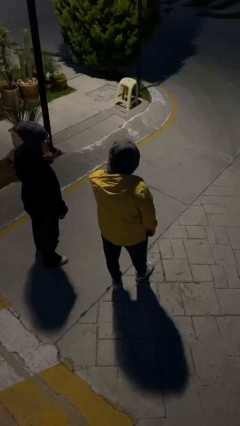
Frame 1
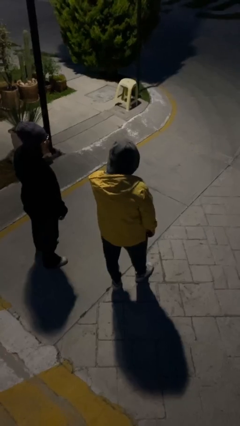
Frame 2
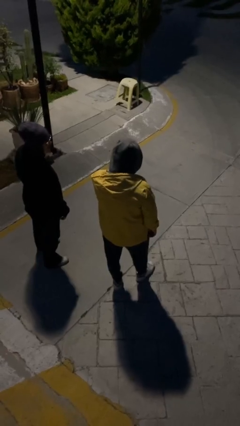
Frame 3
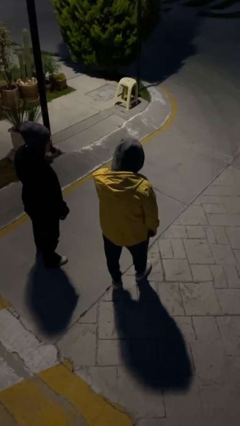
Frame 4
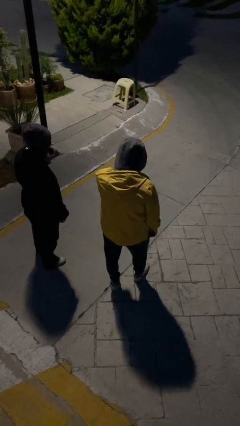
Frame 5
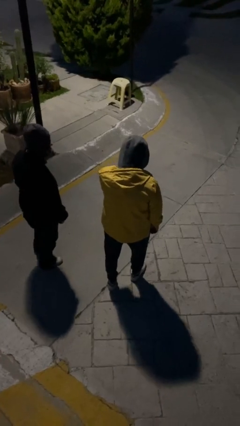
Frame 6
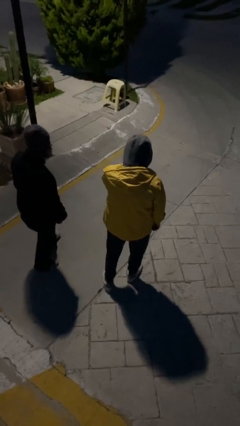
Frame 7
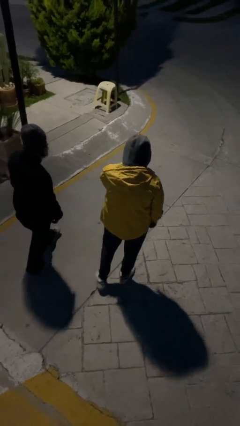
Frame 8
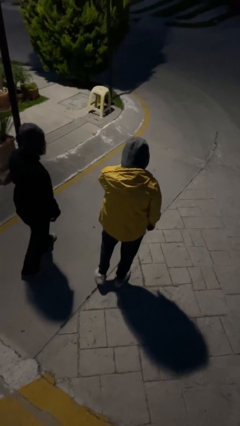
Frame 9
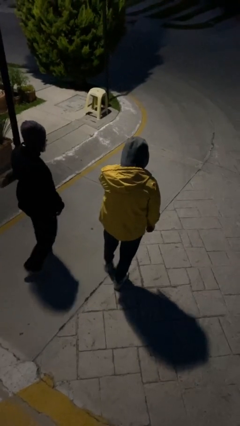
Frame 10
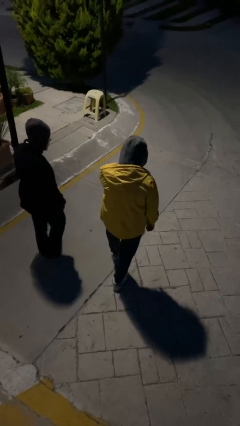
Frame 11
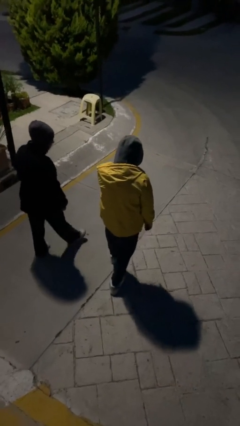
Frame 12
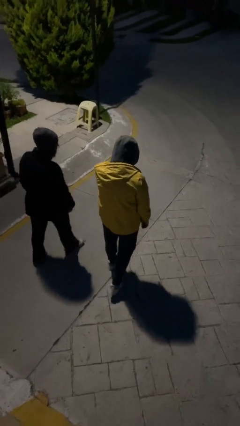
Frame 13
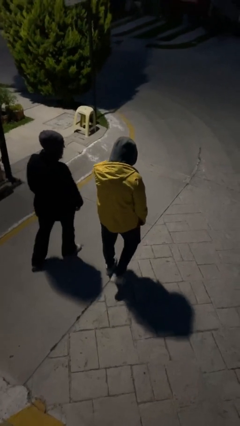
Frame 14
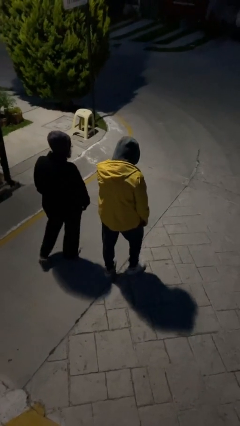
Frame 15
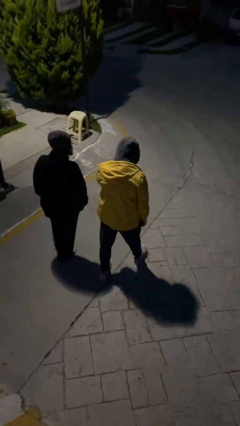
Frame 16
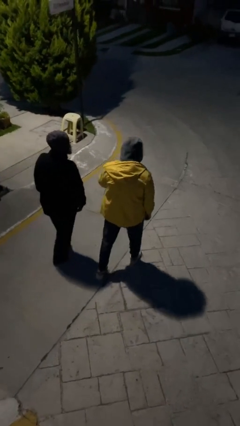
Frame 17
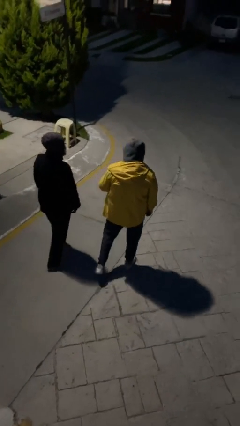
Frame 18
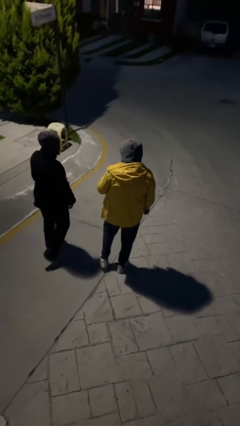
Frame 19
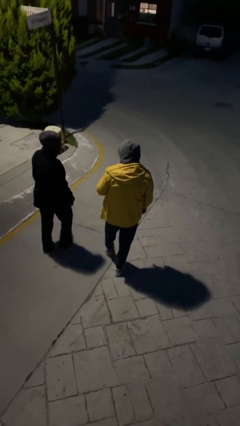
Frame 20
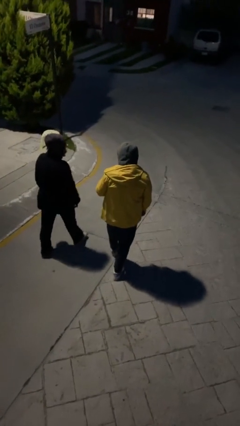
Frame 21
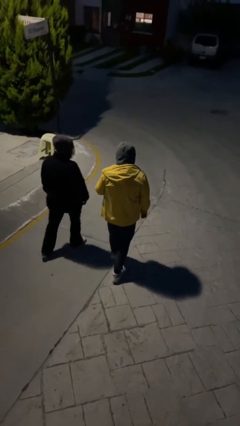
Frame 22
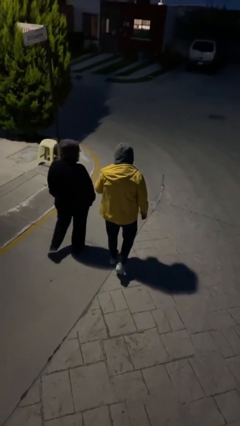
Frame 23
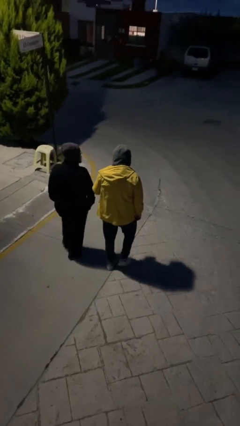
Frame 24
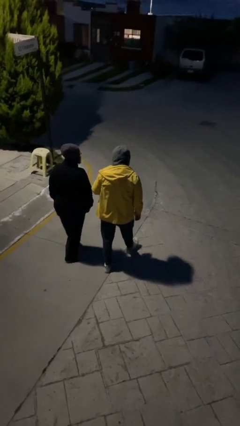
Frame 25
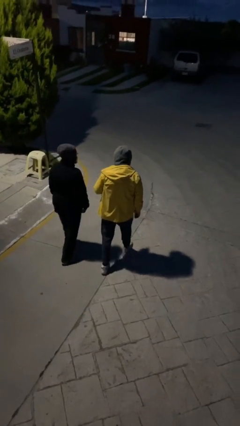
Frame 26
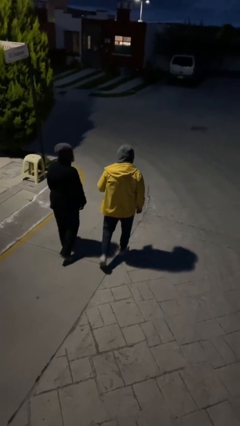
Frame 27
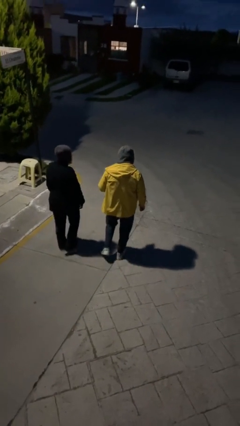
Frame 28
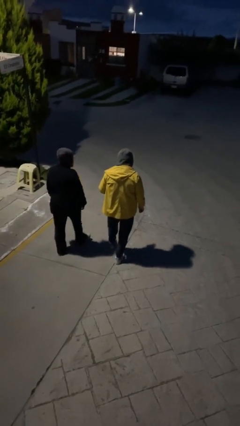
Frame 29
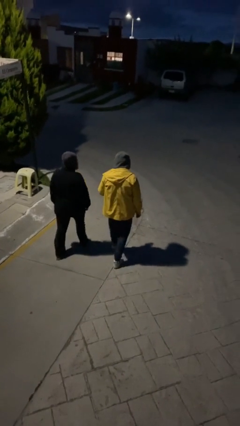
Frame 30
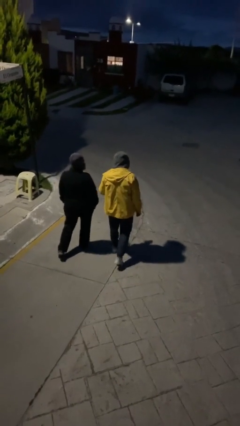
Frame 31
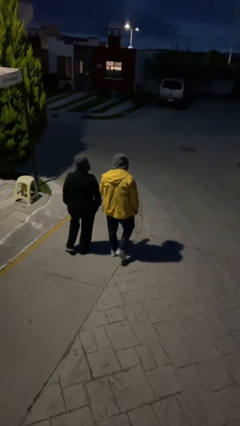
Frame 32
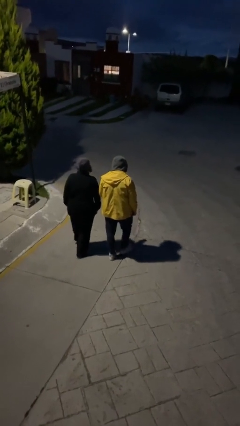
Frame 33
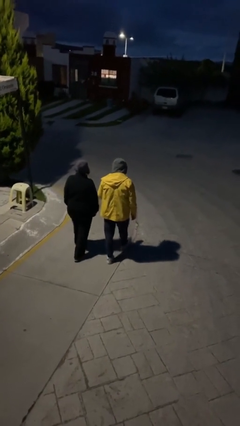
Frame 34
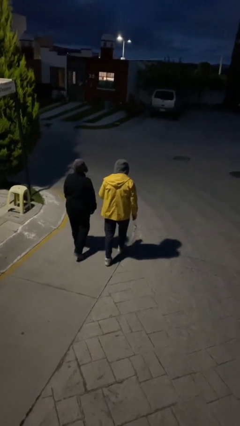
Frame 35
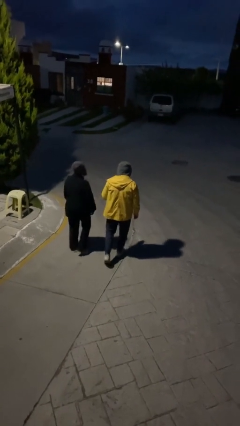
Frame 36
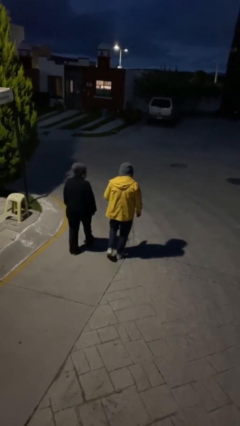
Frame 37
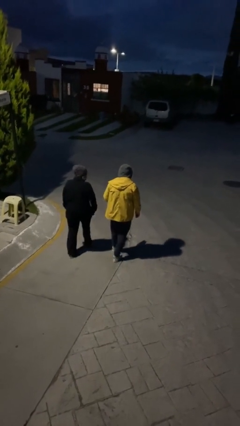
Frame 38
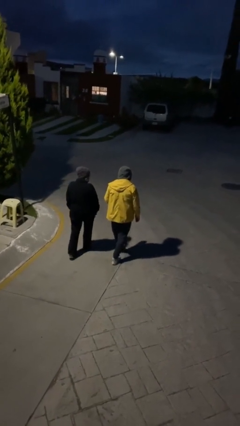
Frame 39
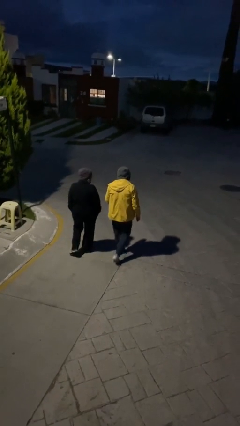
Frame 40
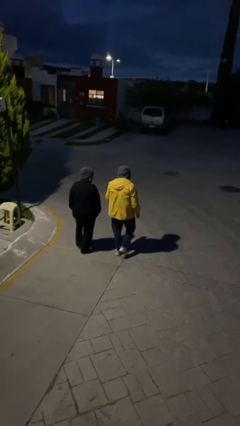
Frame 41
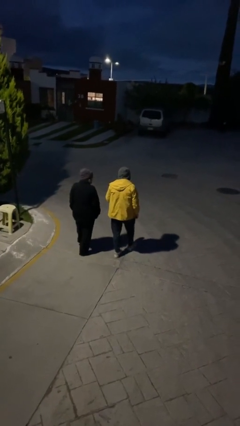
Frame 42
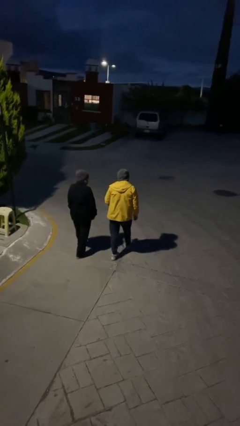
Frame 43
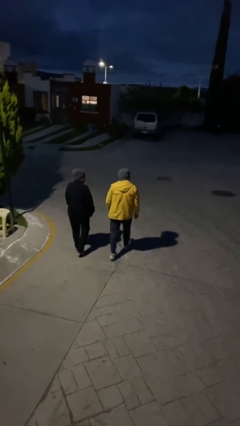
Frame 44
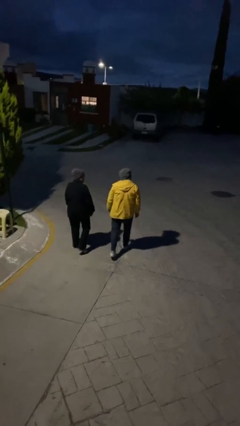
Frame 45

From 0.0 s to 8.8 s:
person talks to person

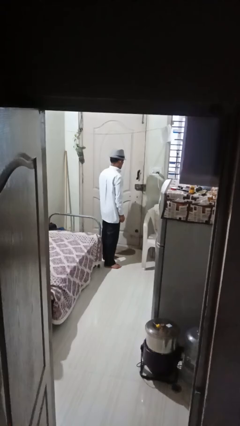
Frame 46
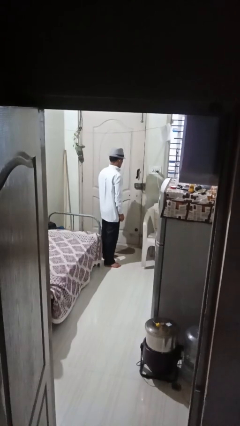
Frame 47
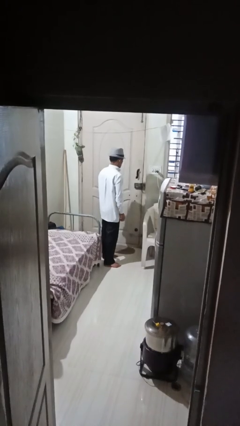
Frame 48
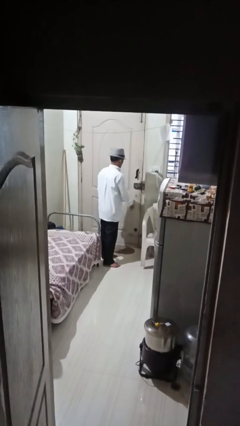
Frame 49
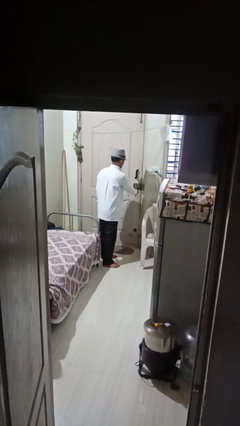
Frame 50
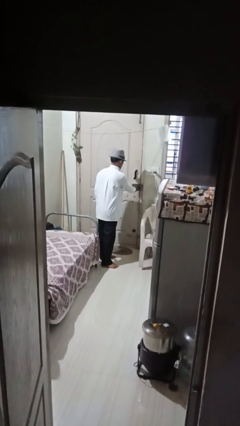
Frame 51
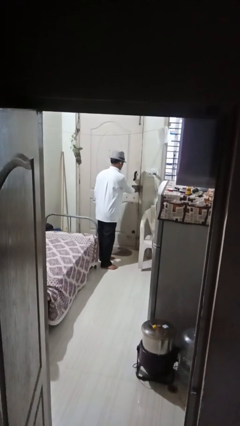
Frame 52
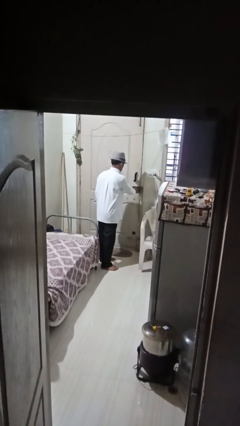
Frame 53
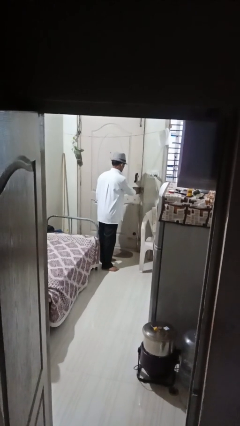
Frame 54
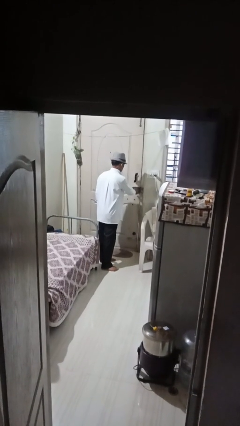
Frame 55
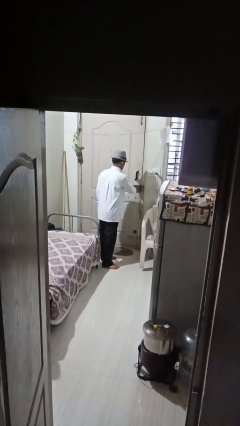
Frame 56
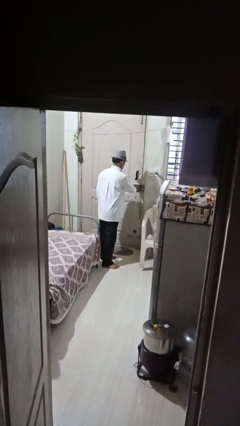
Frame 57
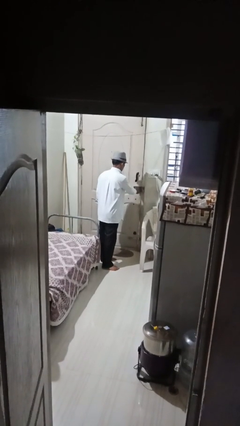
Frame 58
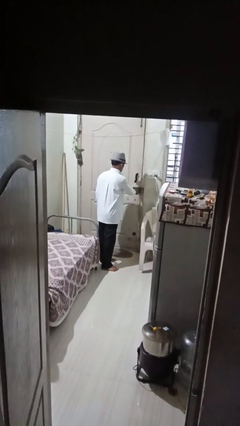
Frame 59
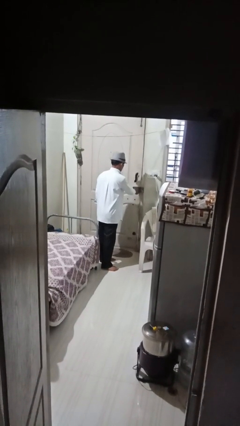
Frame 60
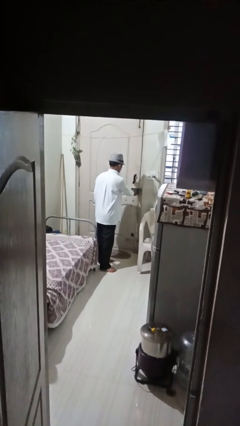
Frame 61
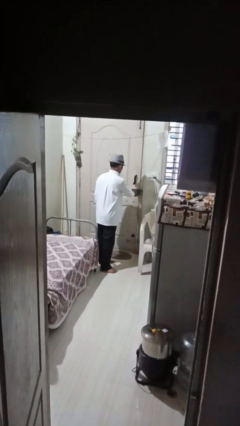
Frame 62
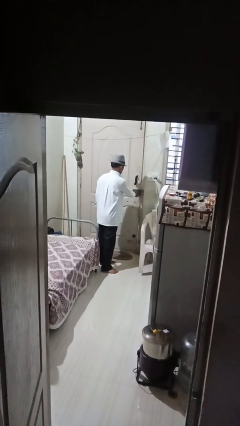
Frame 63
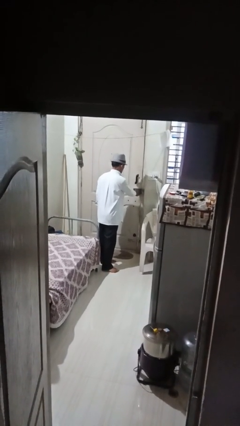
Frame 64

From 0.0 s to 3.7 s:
person unlocks door with keys

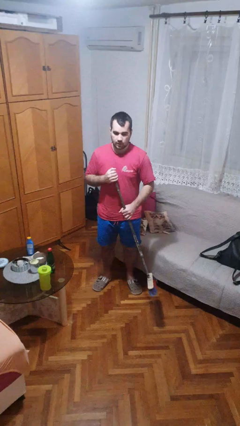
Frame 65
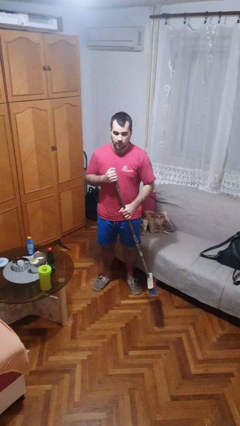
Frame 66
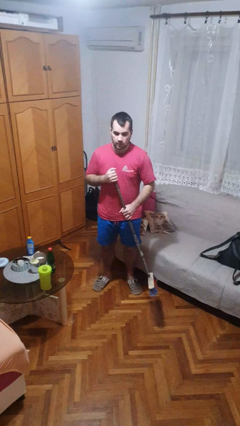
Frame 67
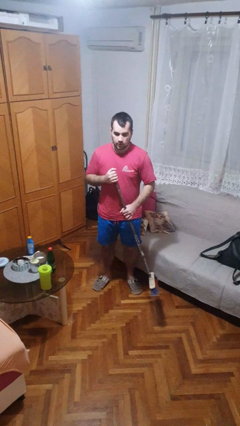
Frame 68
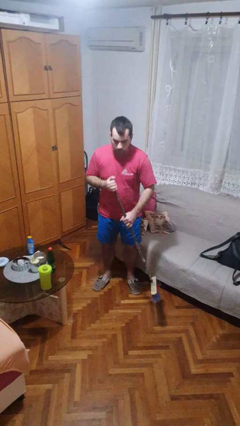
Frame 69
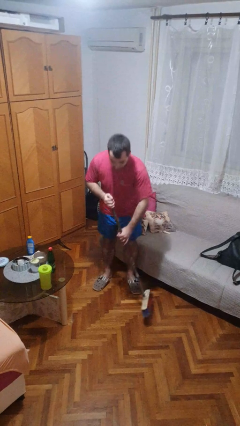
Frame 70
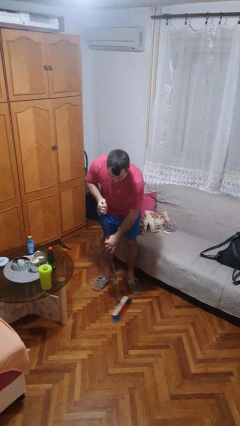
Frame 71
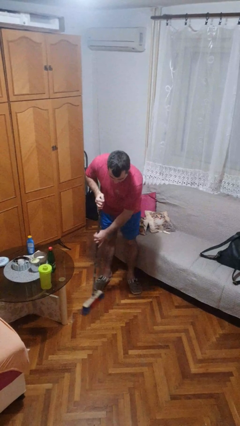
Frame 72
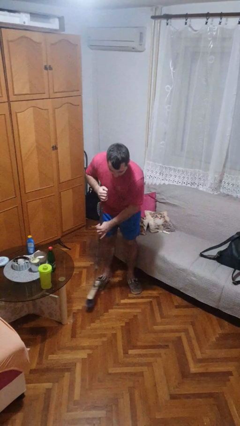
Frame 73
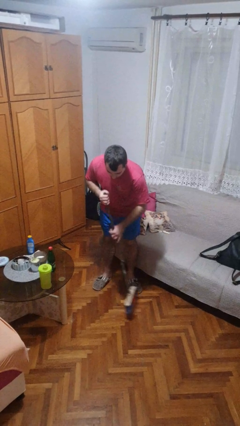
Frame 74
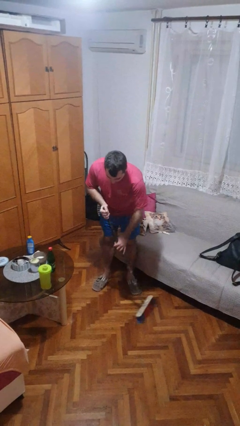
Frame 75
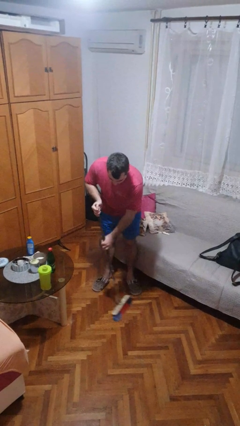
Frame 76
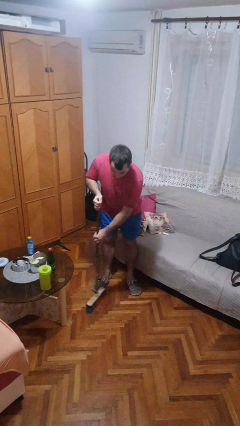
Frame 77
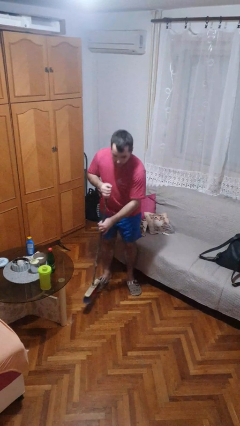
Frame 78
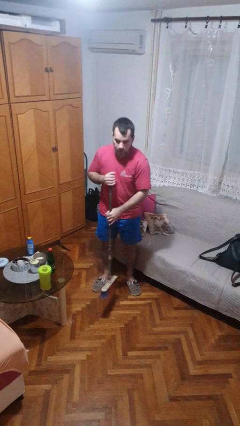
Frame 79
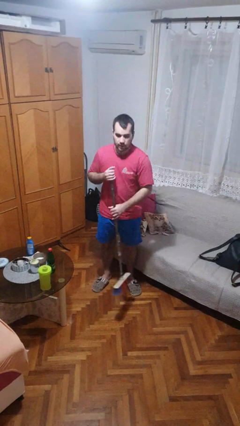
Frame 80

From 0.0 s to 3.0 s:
person sweeps floor

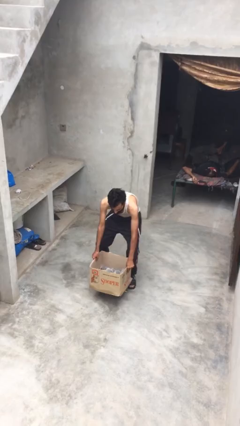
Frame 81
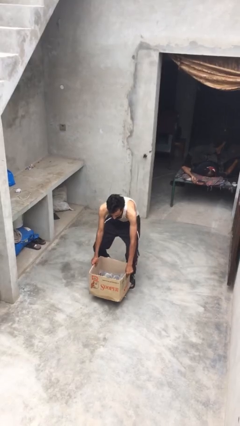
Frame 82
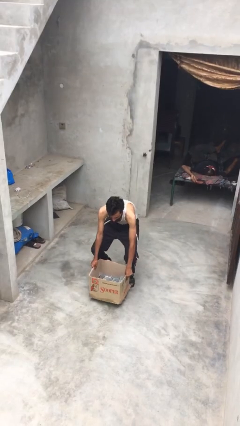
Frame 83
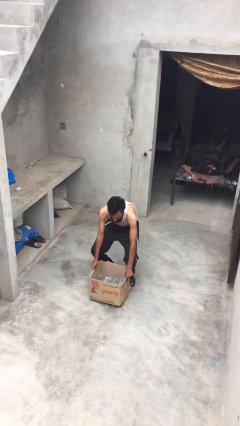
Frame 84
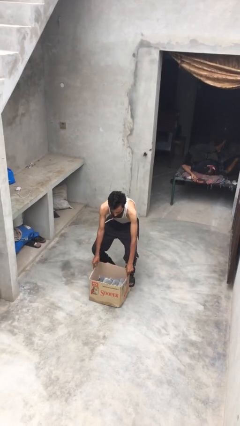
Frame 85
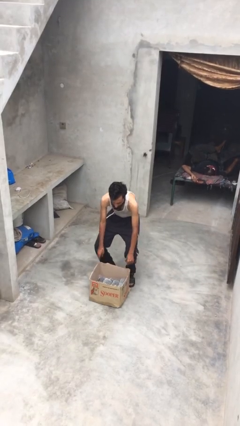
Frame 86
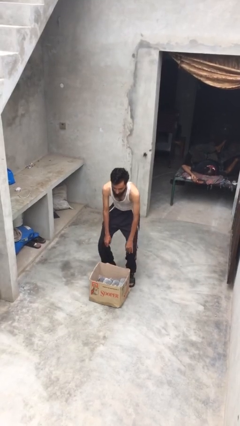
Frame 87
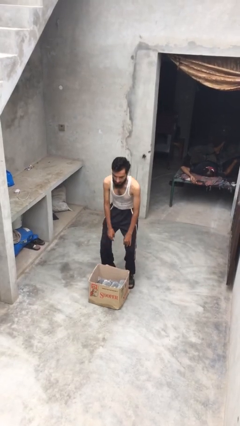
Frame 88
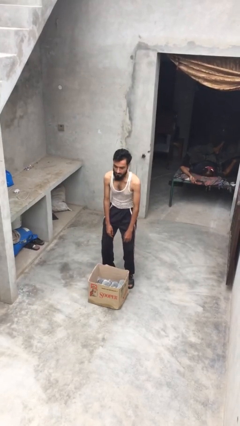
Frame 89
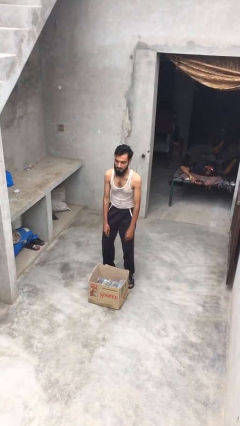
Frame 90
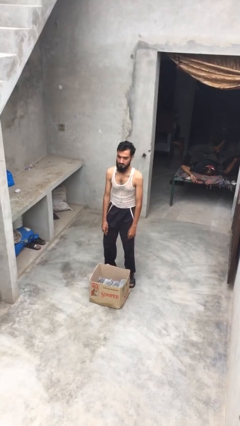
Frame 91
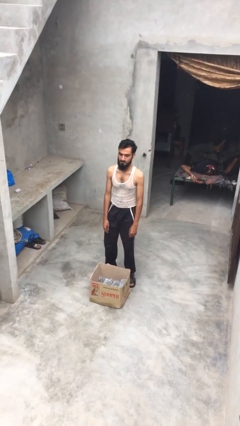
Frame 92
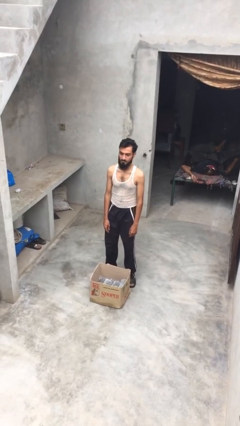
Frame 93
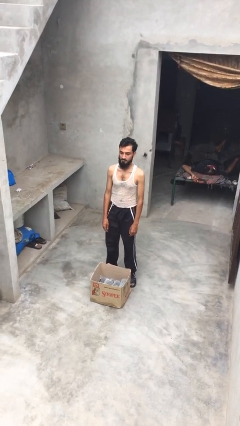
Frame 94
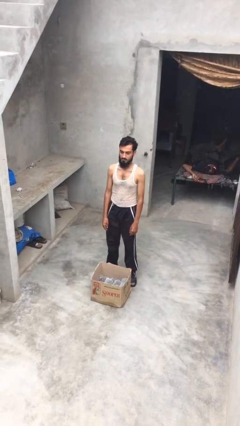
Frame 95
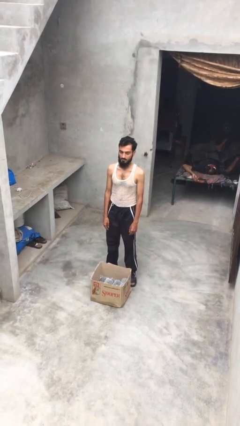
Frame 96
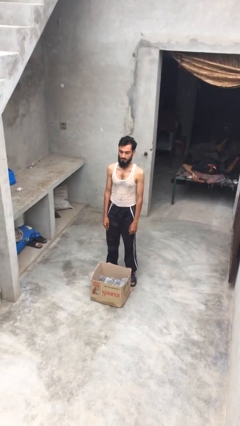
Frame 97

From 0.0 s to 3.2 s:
person puts down object on floor
